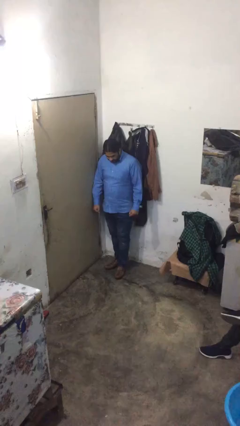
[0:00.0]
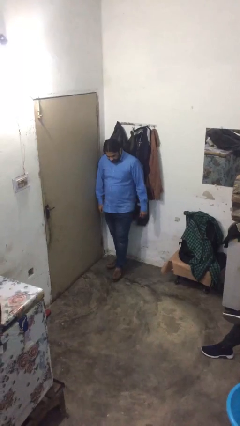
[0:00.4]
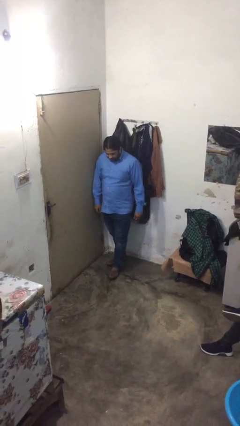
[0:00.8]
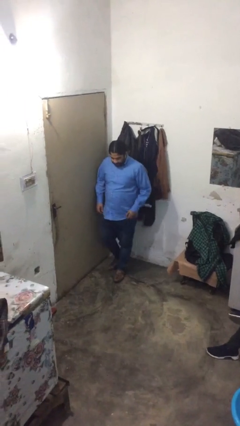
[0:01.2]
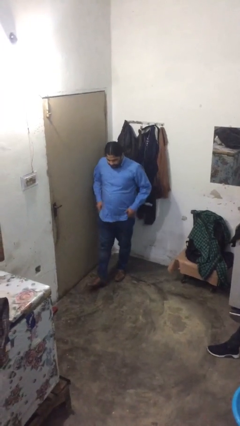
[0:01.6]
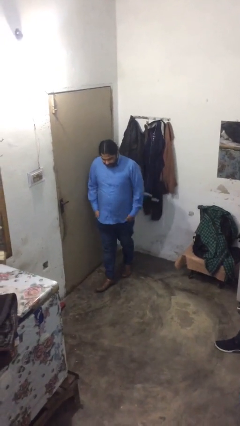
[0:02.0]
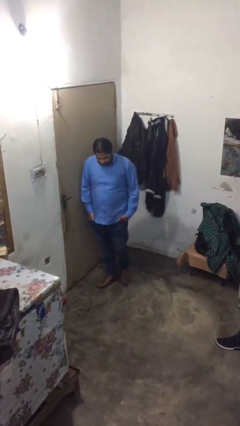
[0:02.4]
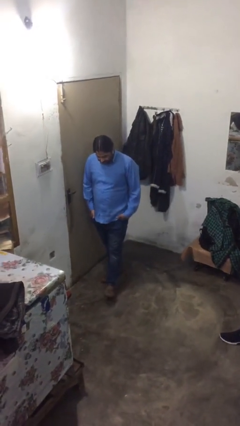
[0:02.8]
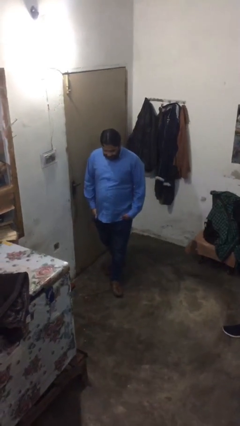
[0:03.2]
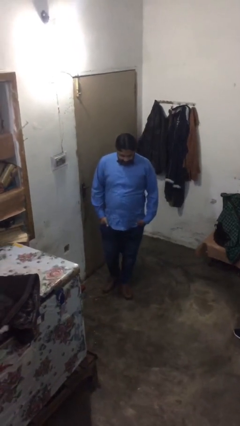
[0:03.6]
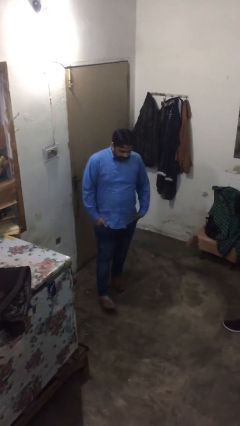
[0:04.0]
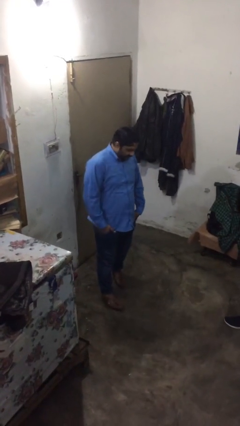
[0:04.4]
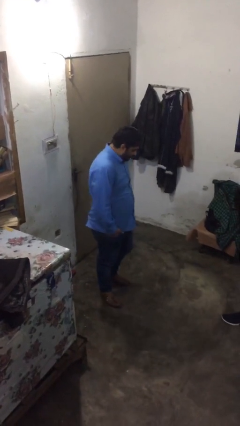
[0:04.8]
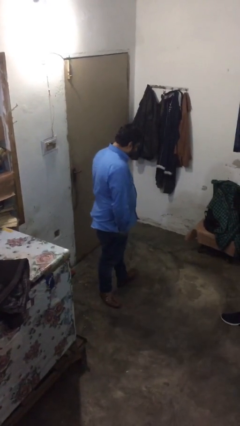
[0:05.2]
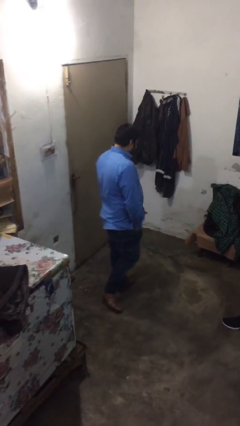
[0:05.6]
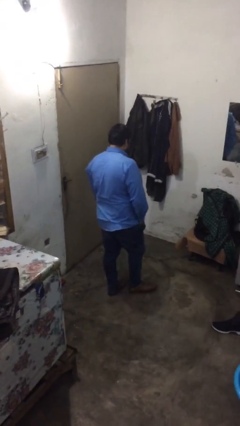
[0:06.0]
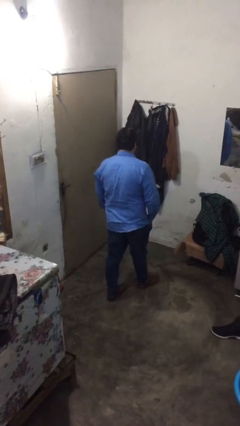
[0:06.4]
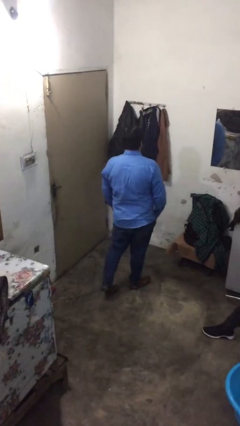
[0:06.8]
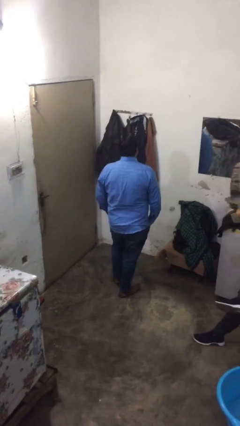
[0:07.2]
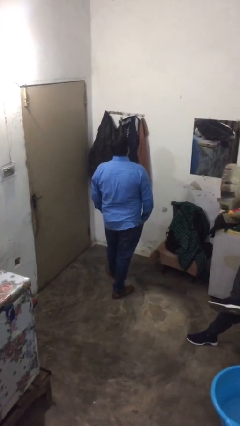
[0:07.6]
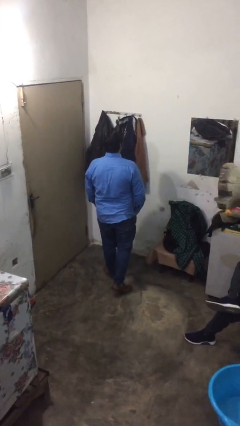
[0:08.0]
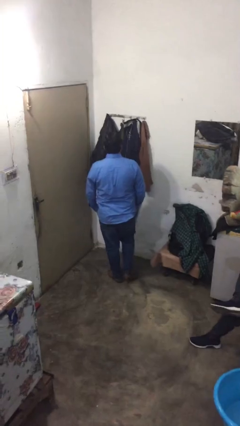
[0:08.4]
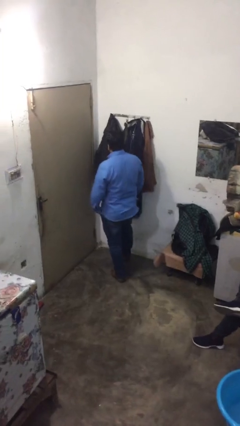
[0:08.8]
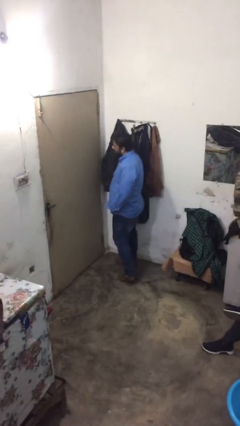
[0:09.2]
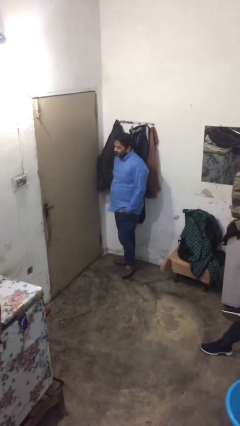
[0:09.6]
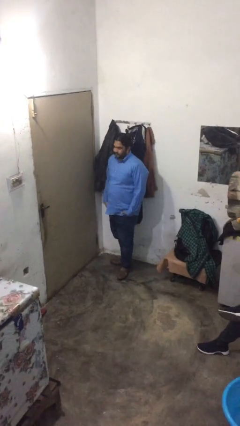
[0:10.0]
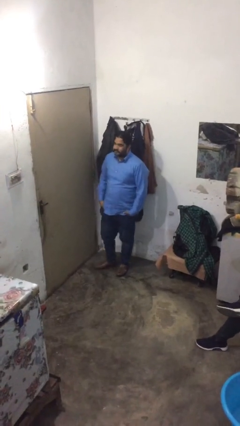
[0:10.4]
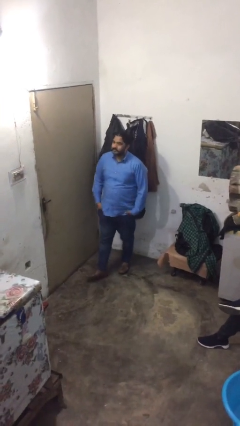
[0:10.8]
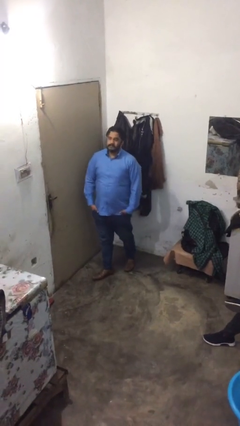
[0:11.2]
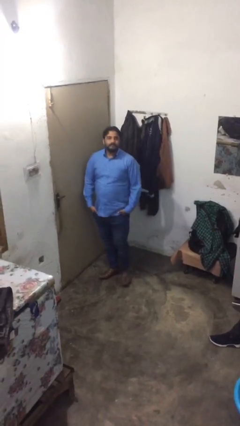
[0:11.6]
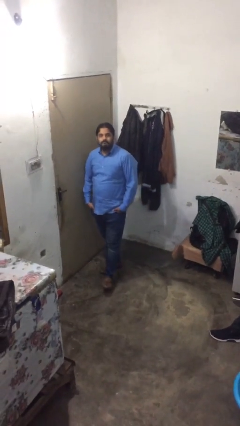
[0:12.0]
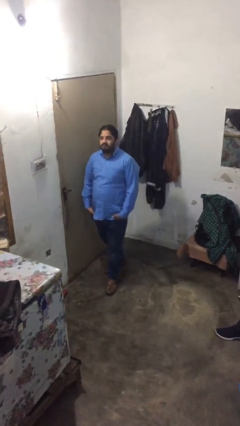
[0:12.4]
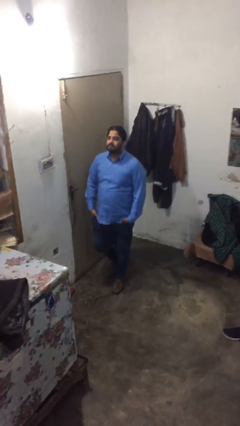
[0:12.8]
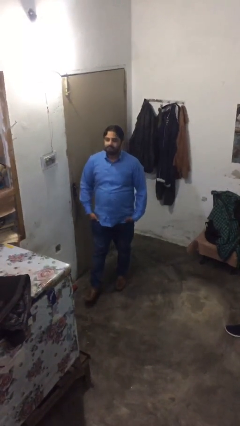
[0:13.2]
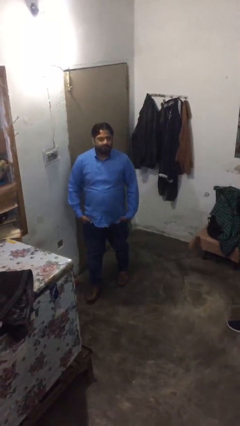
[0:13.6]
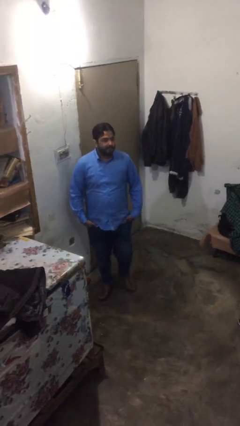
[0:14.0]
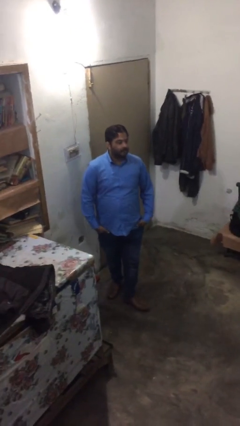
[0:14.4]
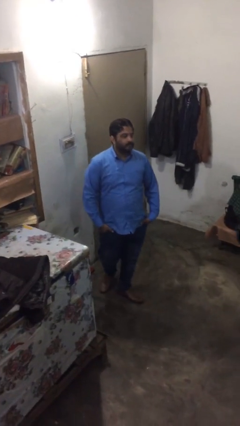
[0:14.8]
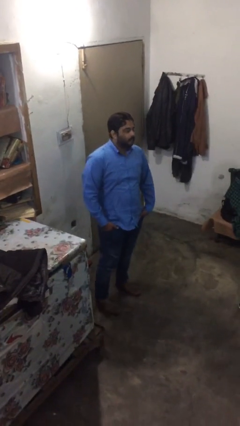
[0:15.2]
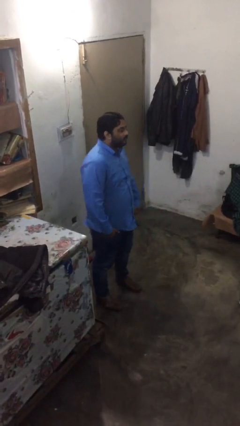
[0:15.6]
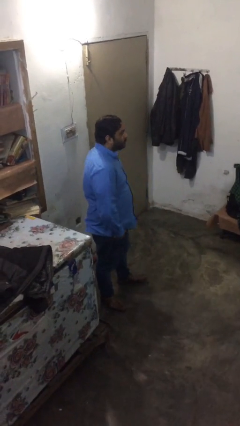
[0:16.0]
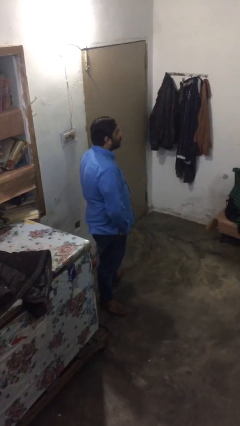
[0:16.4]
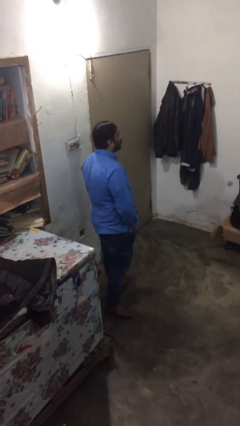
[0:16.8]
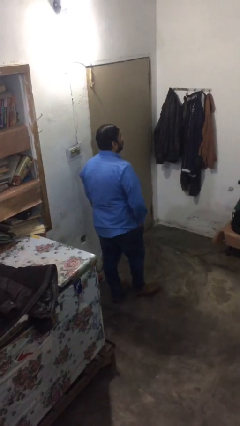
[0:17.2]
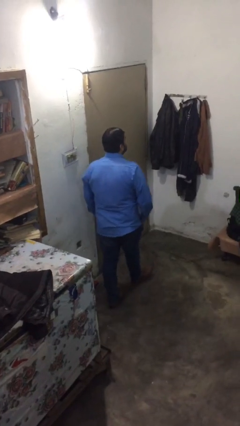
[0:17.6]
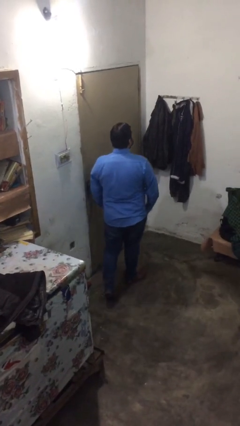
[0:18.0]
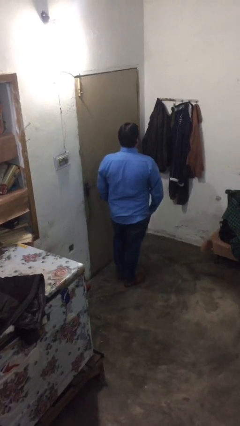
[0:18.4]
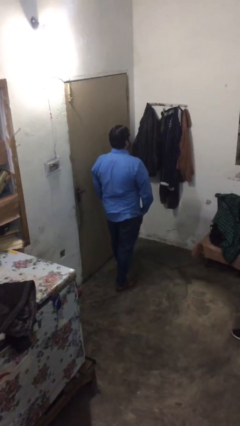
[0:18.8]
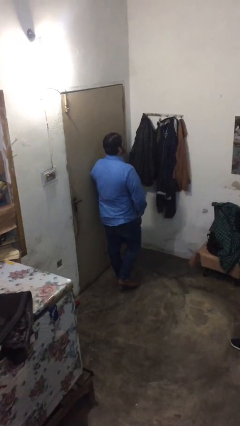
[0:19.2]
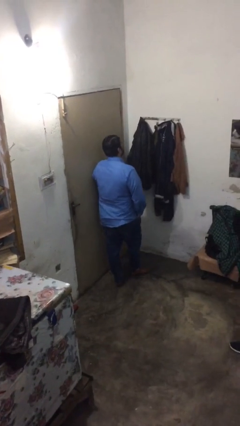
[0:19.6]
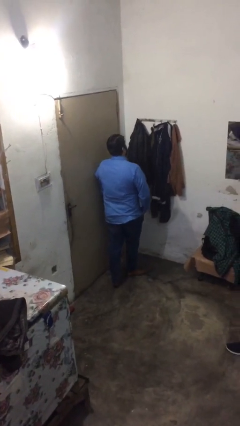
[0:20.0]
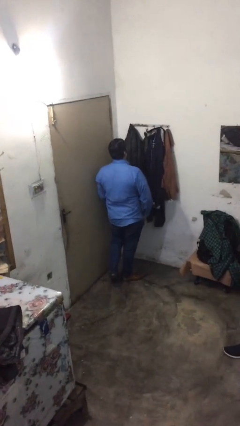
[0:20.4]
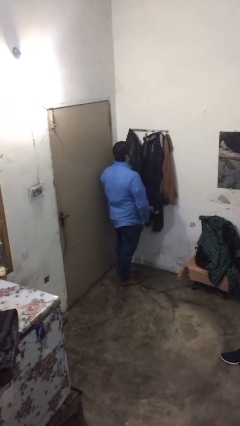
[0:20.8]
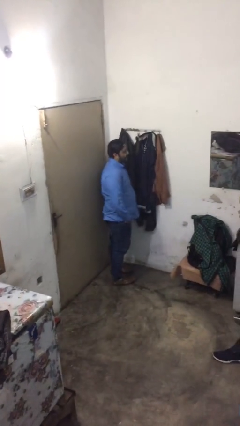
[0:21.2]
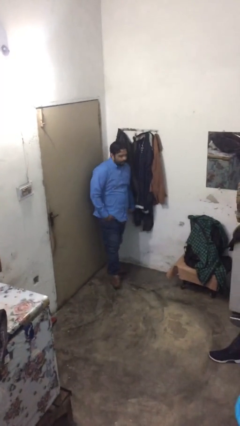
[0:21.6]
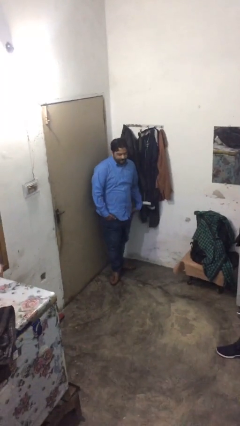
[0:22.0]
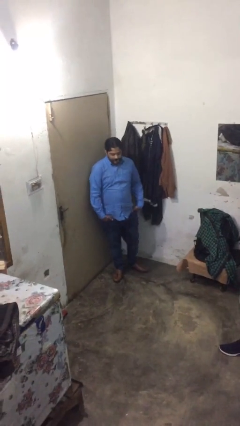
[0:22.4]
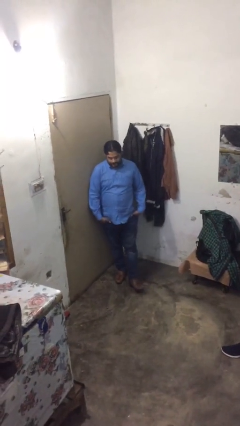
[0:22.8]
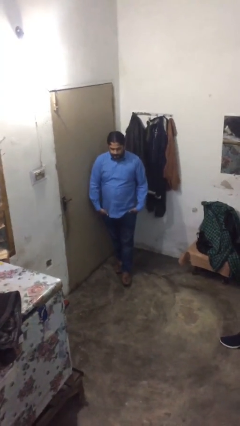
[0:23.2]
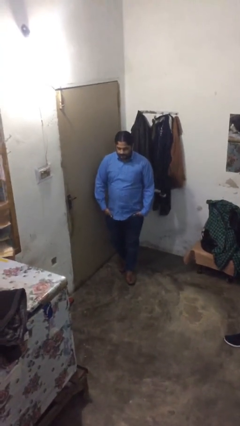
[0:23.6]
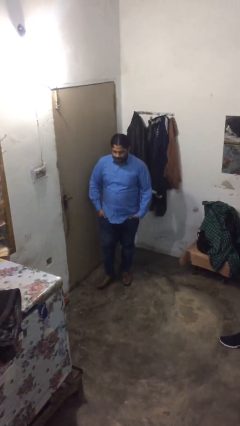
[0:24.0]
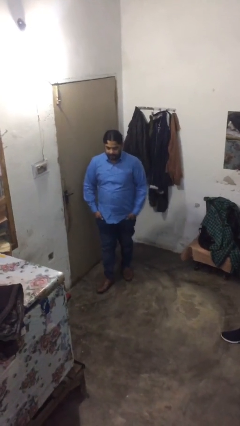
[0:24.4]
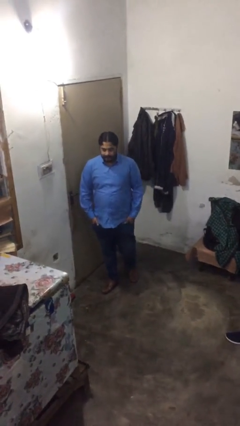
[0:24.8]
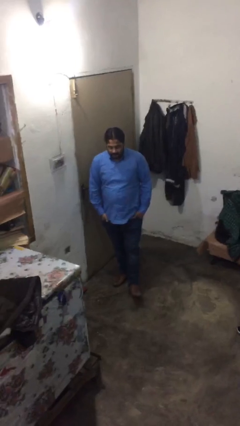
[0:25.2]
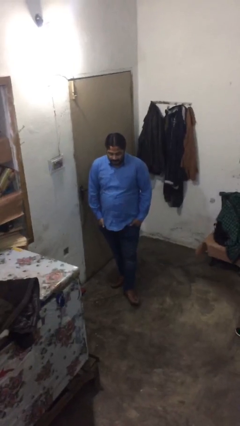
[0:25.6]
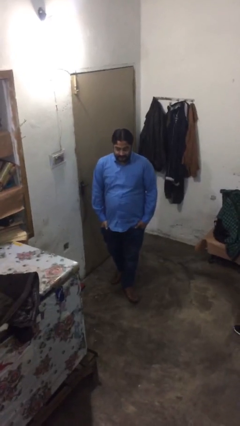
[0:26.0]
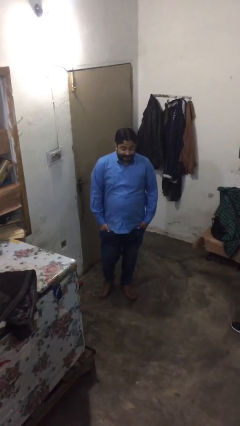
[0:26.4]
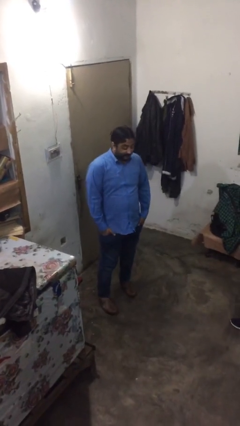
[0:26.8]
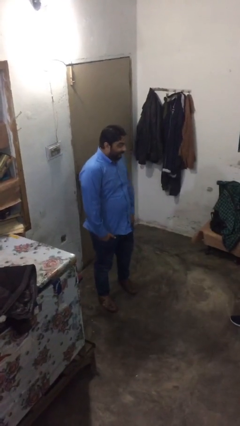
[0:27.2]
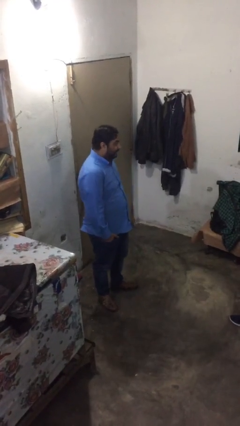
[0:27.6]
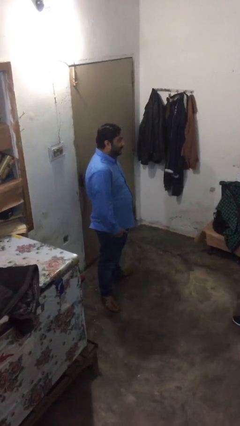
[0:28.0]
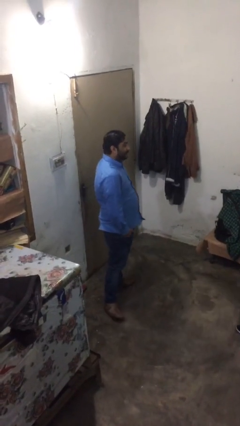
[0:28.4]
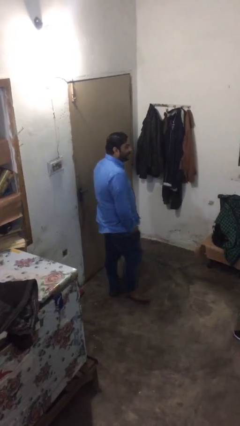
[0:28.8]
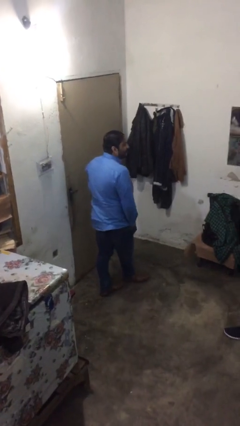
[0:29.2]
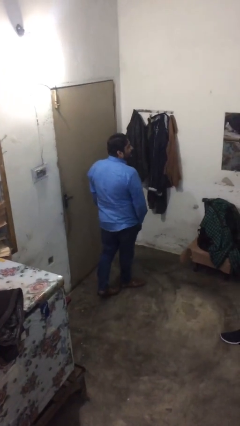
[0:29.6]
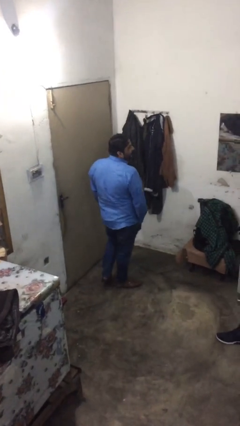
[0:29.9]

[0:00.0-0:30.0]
person walks

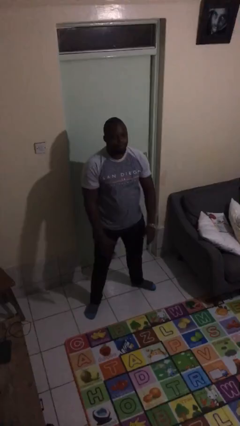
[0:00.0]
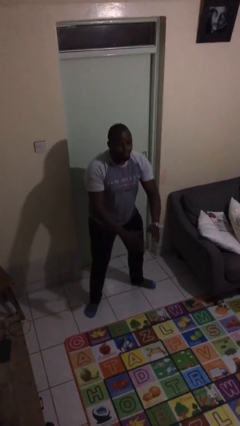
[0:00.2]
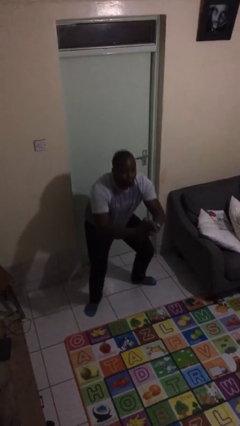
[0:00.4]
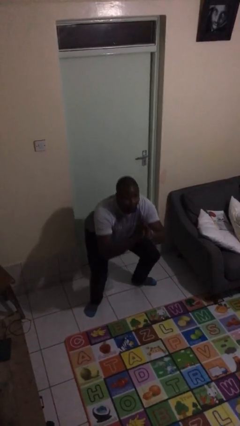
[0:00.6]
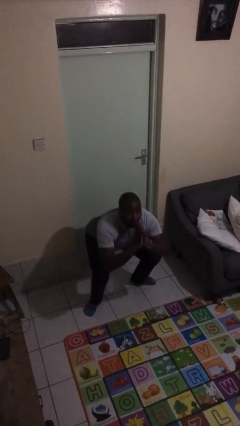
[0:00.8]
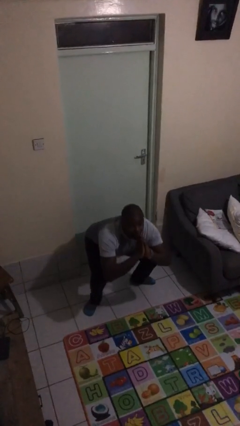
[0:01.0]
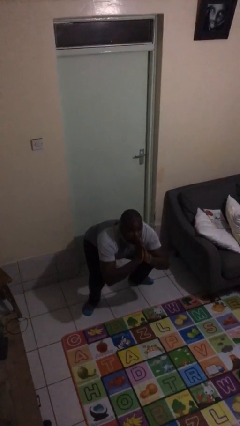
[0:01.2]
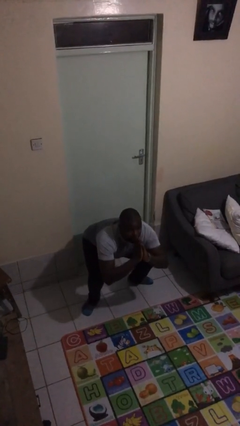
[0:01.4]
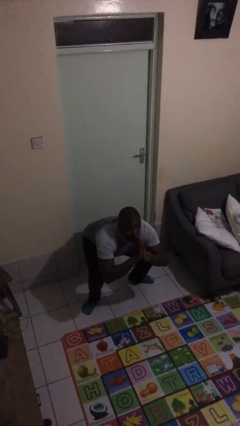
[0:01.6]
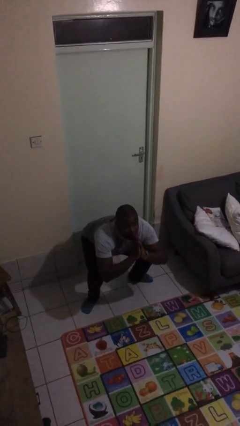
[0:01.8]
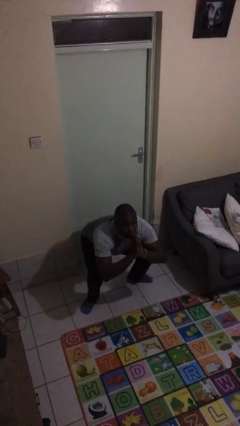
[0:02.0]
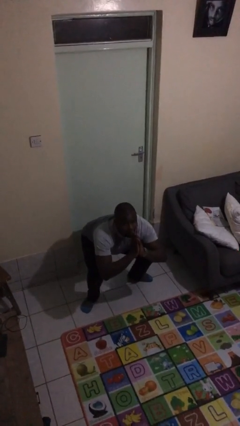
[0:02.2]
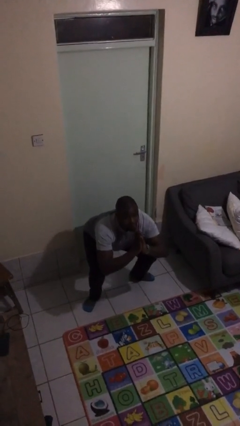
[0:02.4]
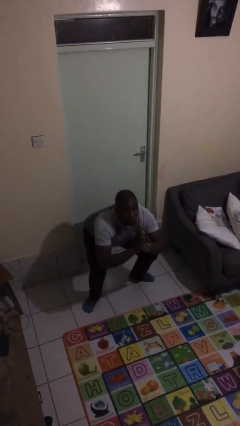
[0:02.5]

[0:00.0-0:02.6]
person squats

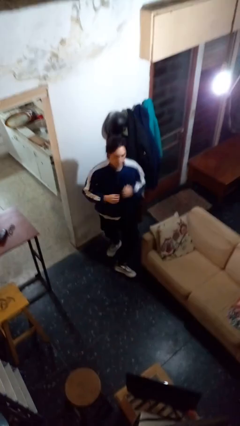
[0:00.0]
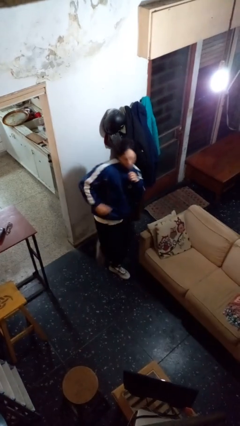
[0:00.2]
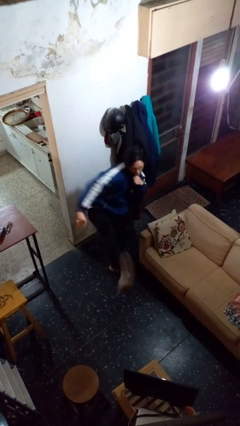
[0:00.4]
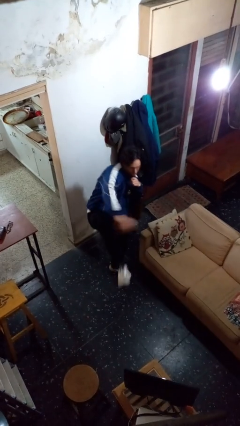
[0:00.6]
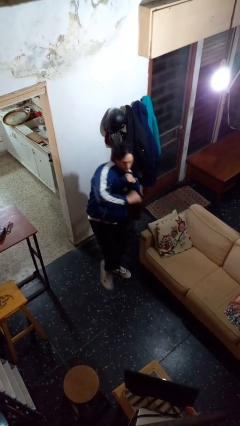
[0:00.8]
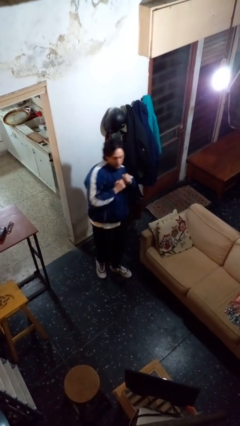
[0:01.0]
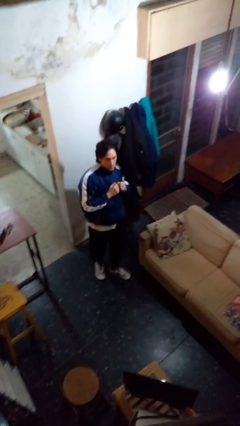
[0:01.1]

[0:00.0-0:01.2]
person karate kicks
